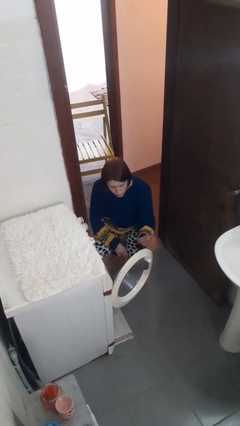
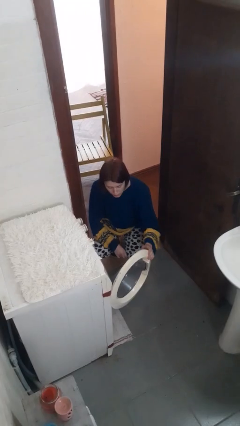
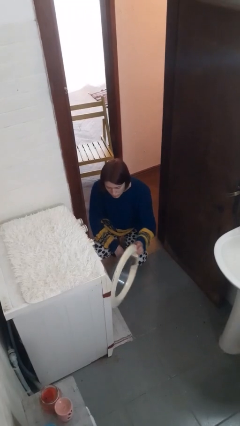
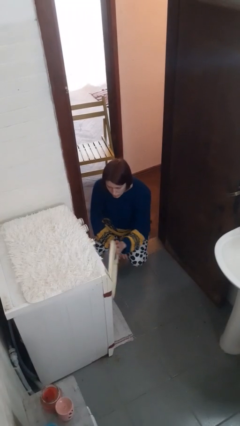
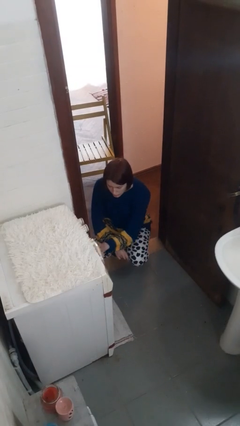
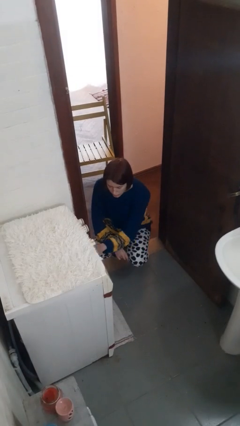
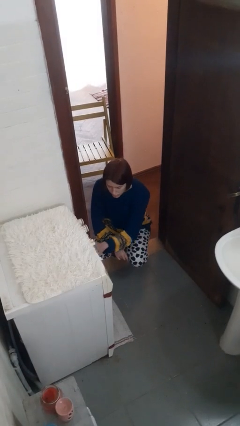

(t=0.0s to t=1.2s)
person closes clothes washer

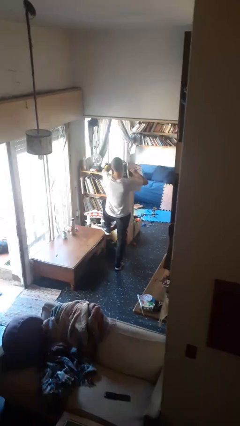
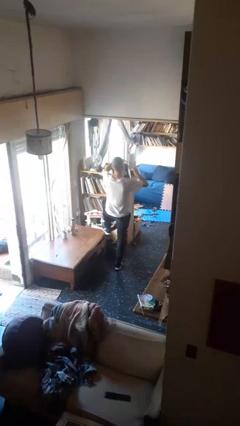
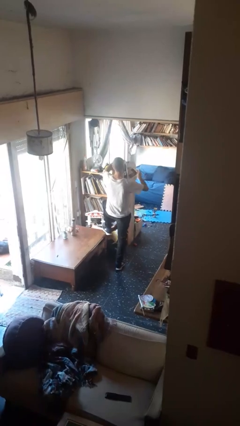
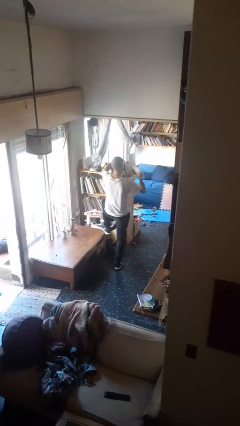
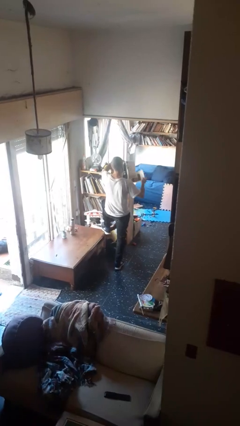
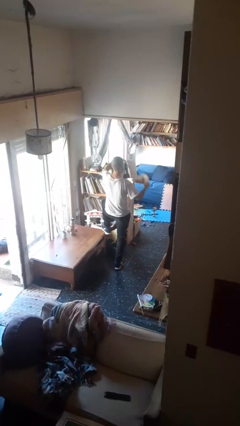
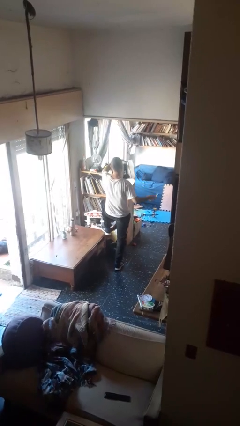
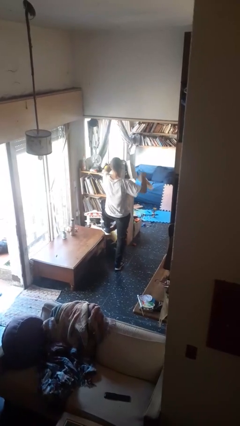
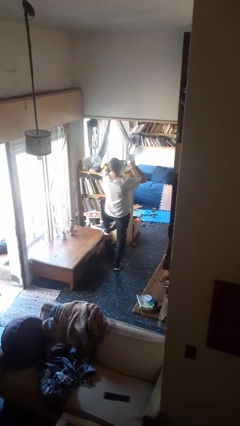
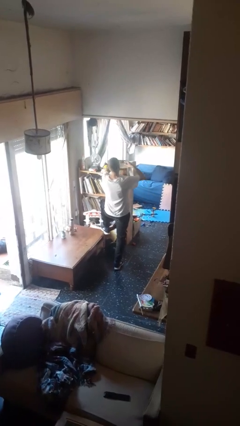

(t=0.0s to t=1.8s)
person tears paper

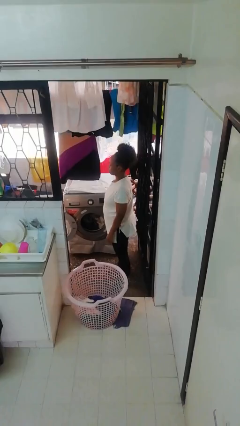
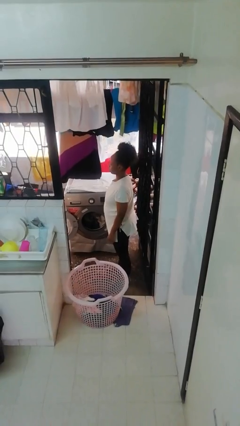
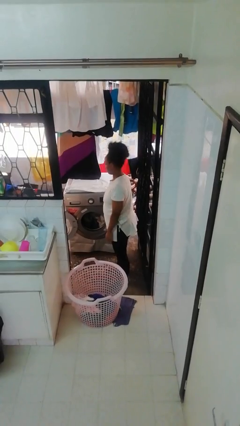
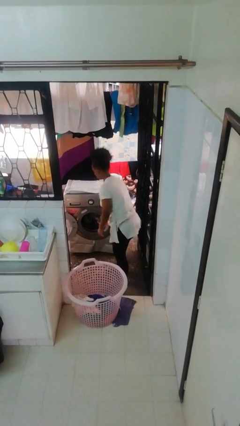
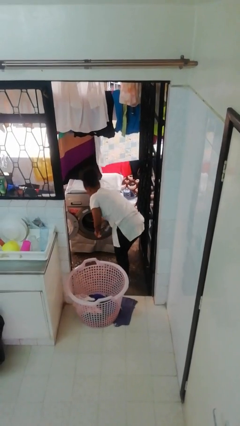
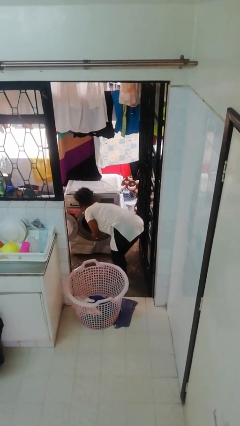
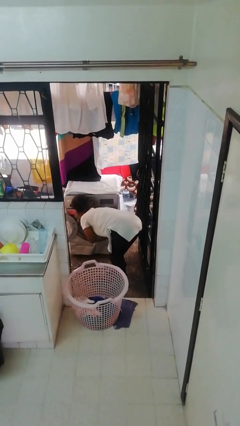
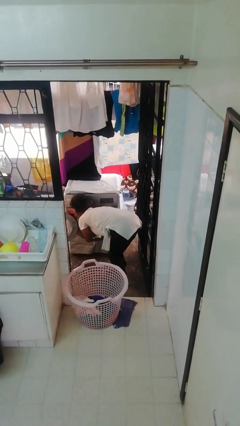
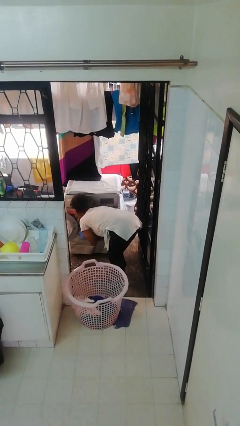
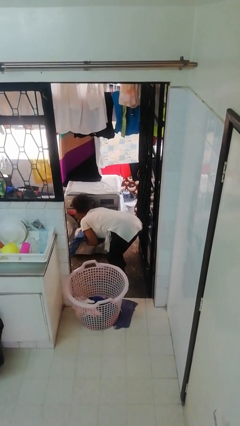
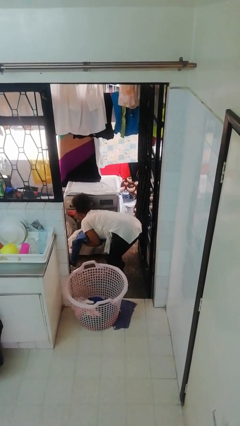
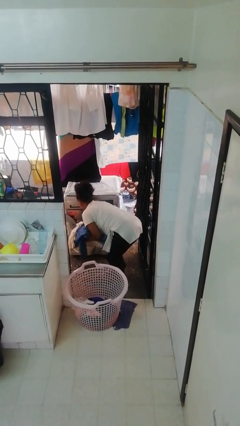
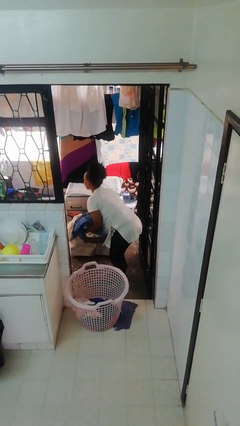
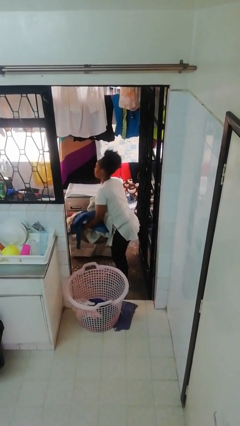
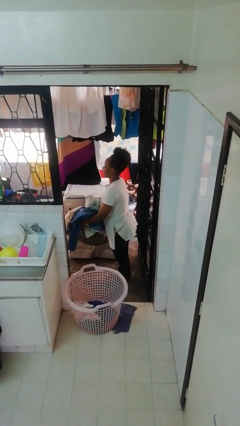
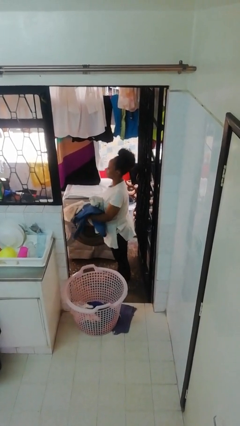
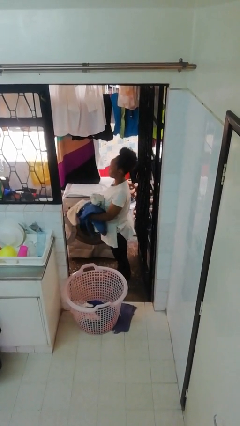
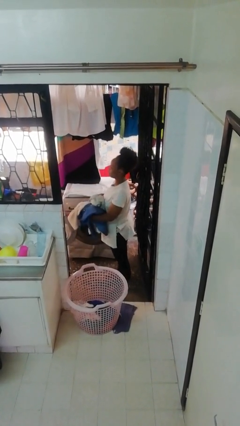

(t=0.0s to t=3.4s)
person unloads clotheswasher

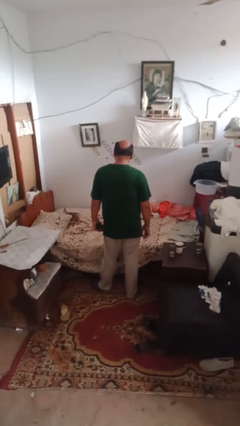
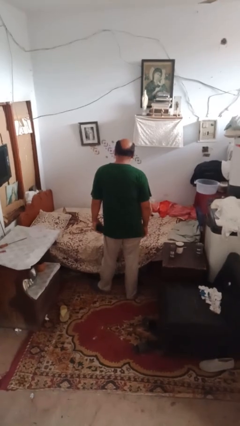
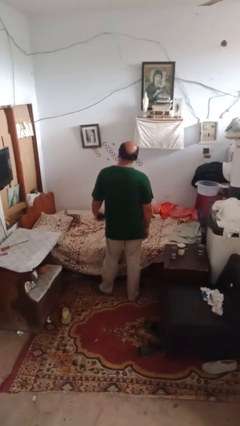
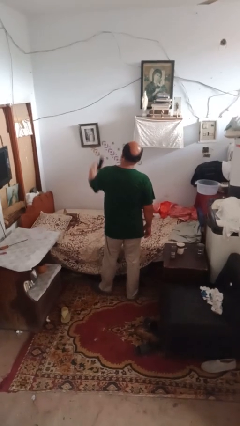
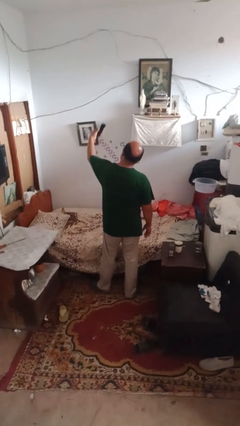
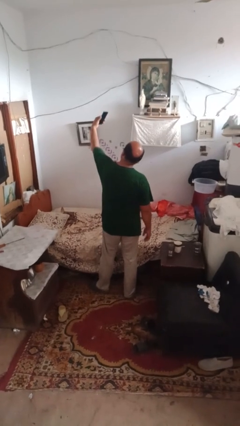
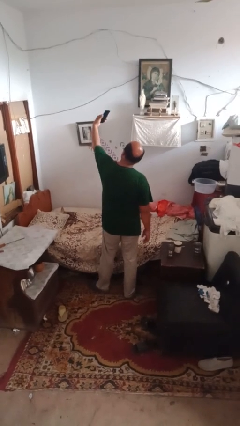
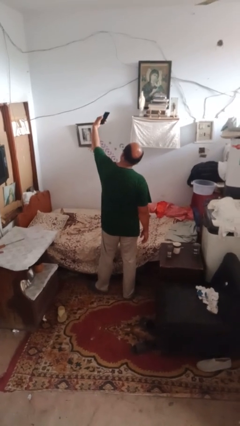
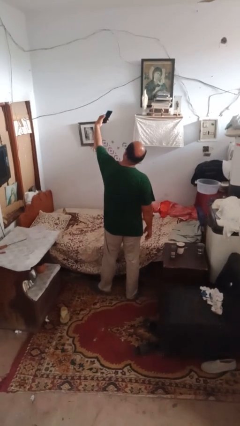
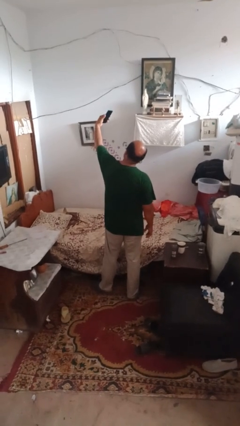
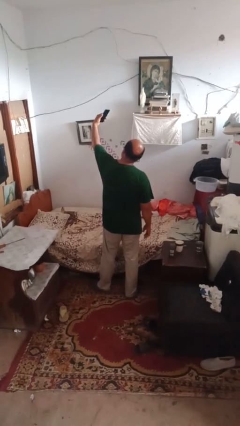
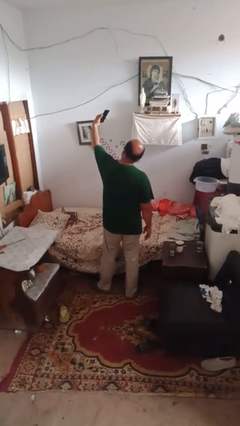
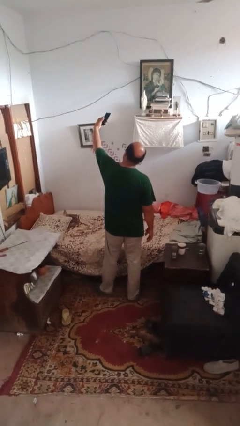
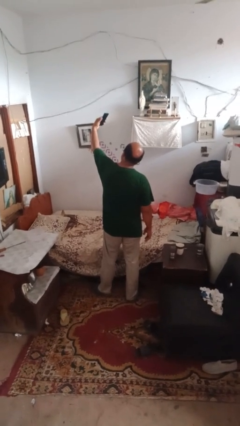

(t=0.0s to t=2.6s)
person takes selfie

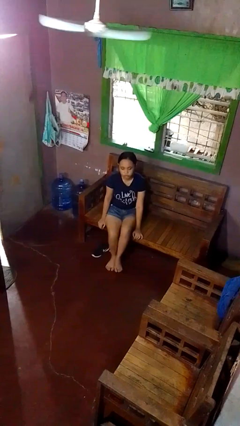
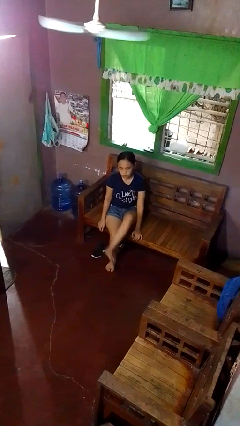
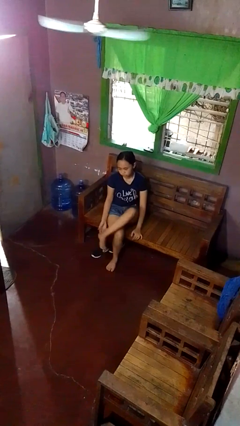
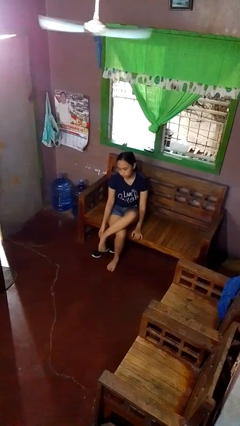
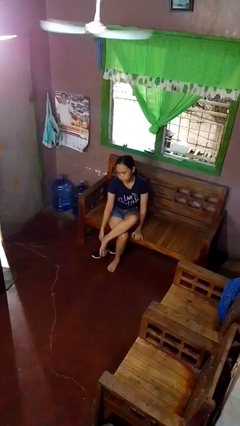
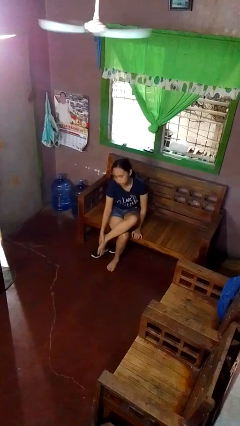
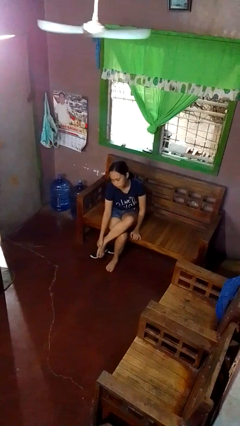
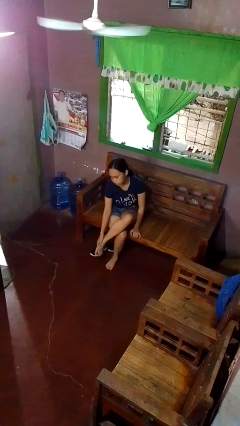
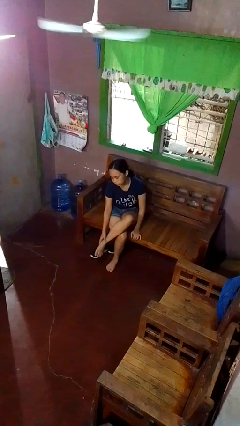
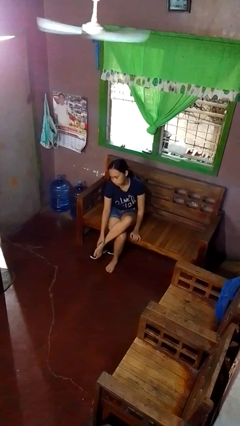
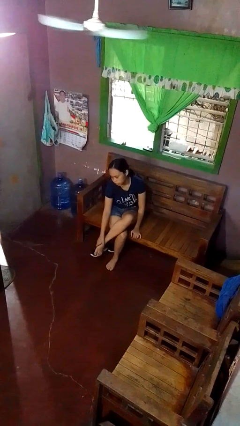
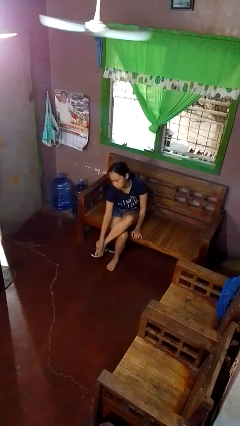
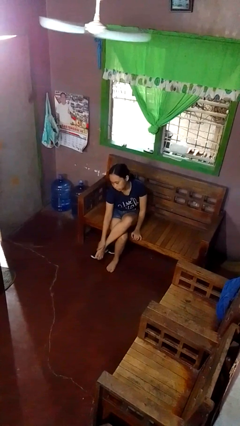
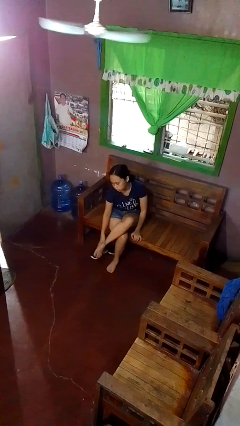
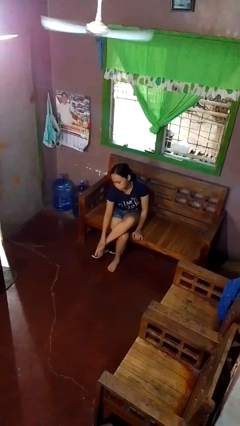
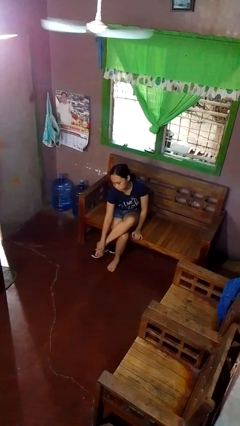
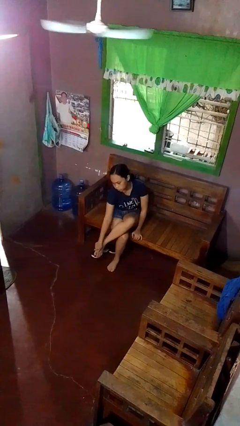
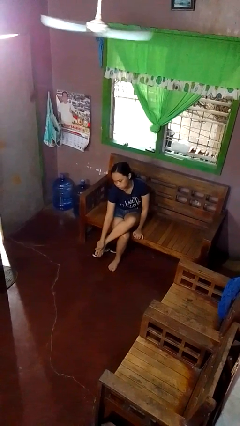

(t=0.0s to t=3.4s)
person rubs foot

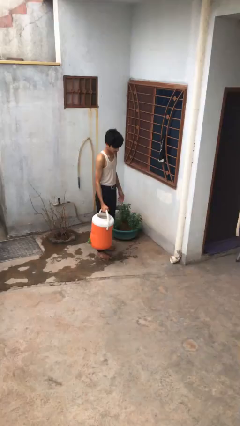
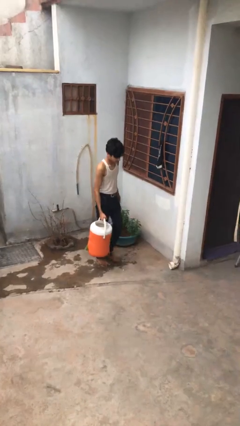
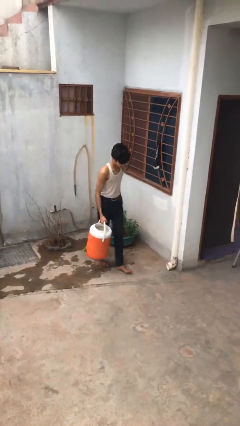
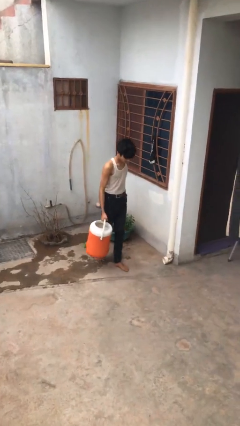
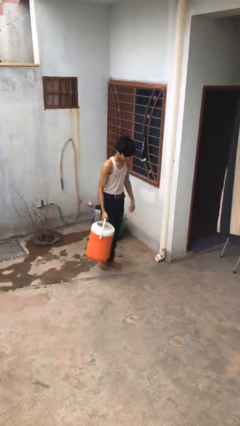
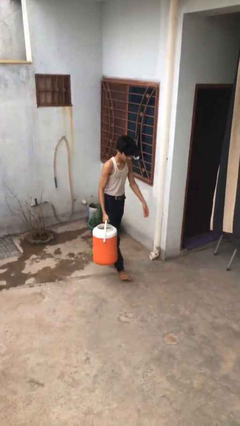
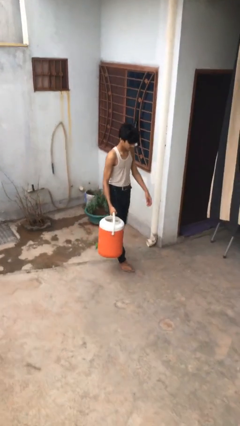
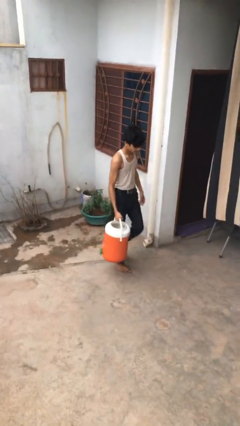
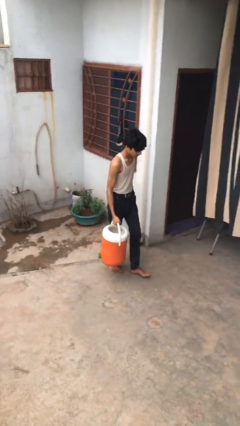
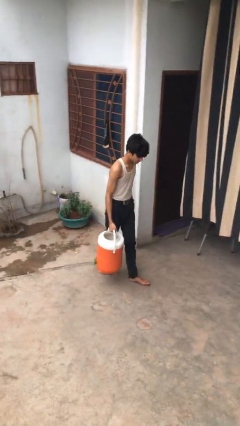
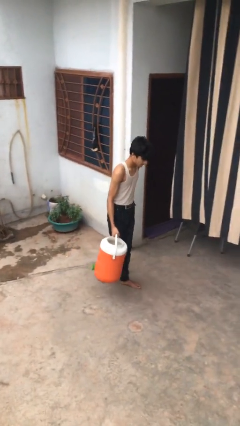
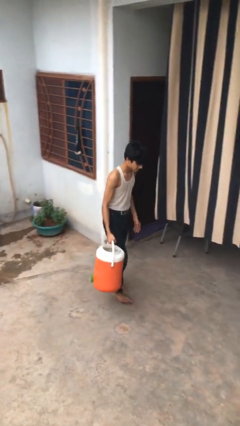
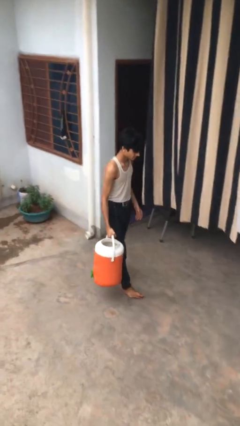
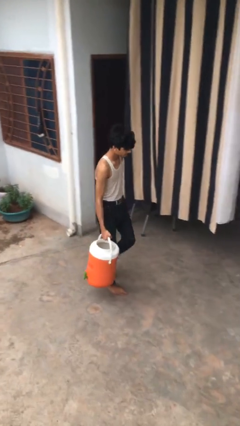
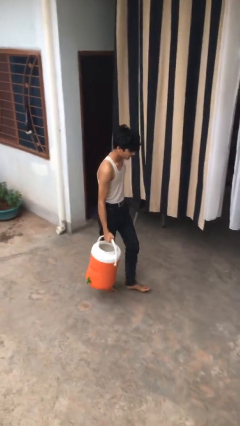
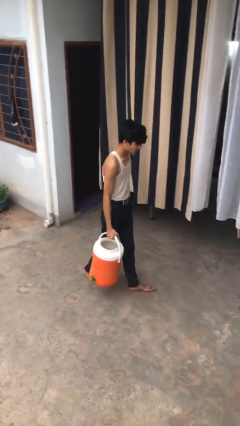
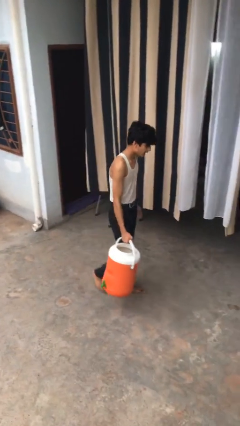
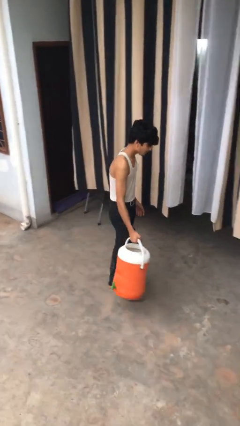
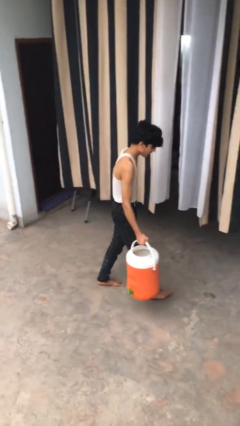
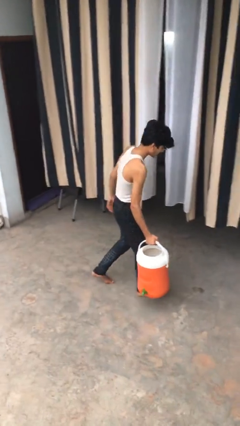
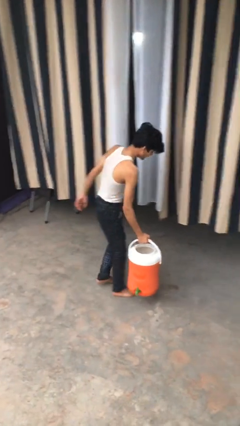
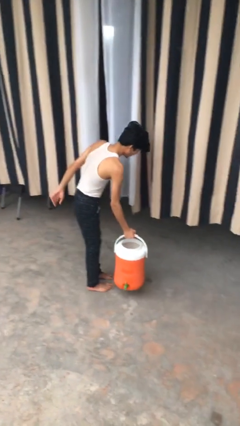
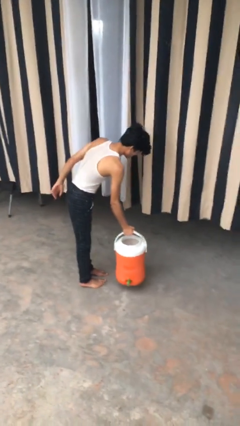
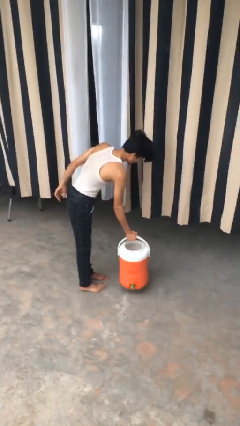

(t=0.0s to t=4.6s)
person carries heavy object

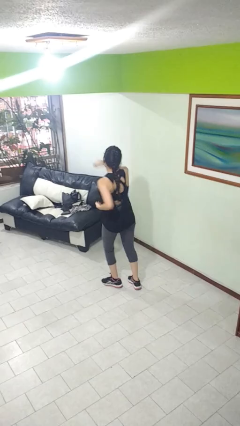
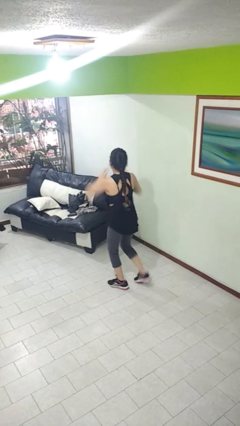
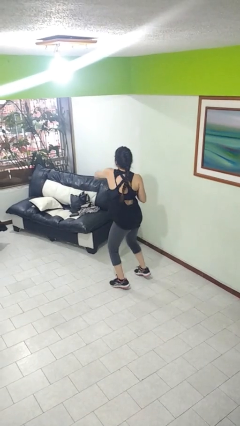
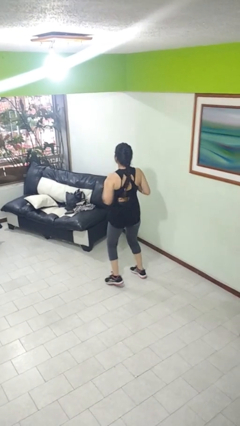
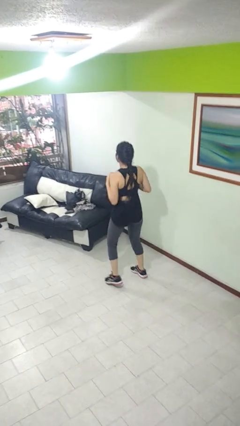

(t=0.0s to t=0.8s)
person karate chop
